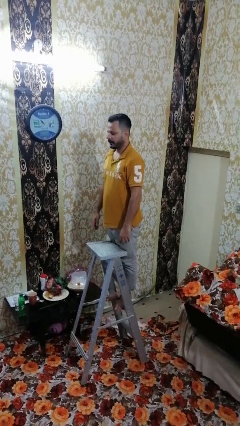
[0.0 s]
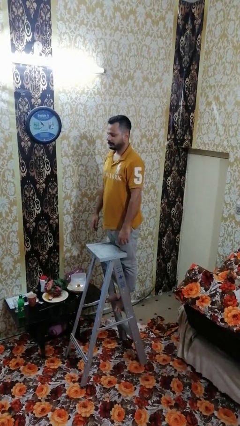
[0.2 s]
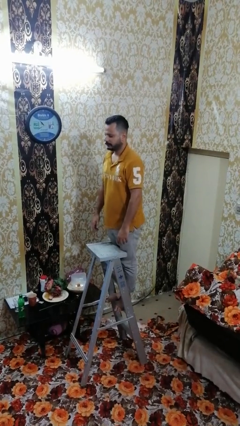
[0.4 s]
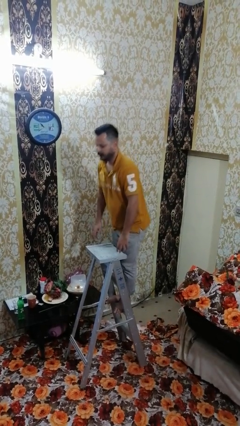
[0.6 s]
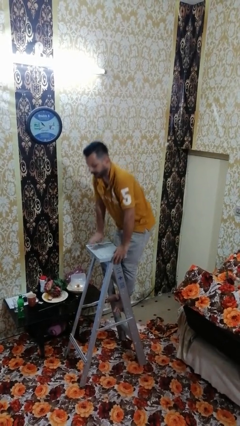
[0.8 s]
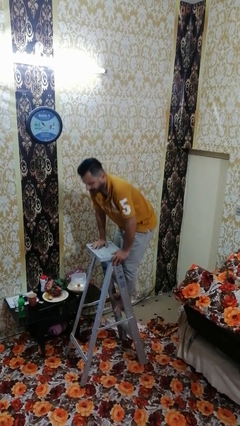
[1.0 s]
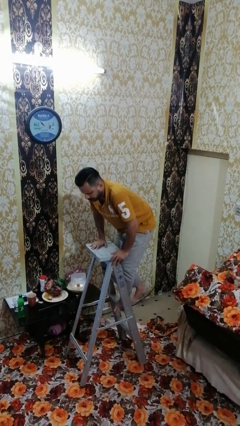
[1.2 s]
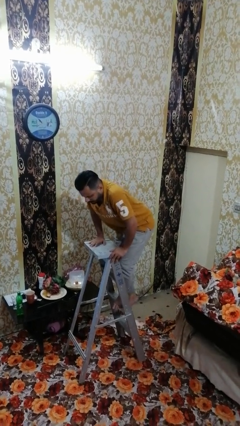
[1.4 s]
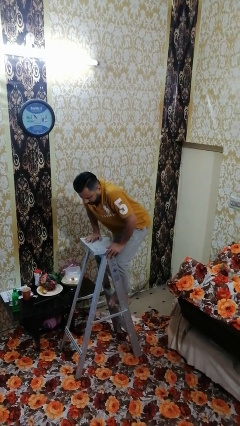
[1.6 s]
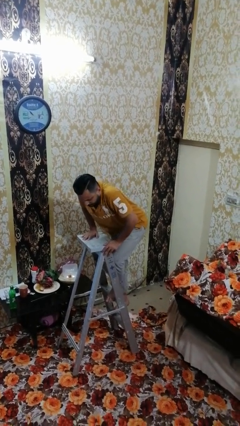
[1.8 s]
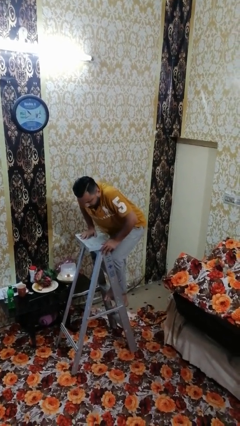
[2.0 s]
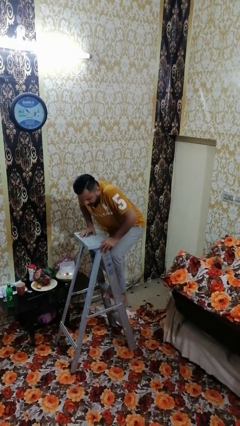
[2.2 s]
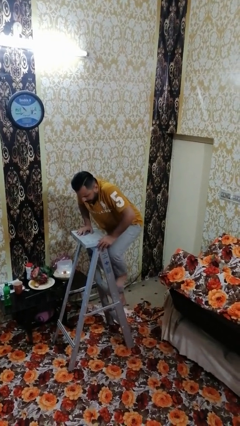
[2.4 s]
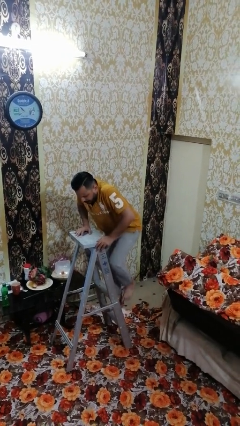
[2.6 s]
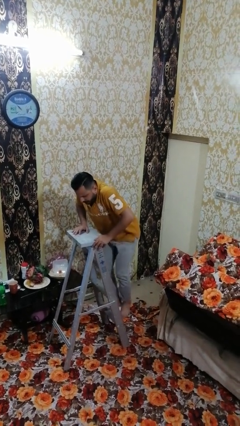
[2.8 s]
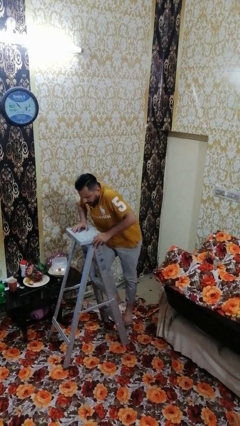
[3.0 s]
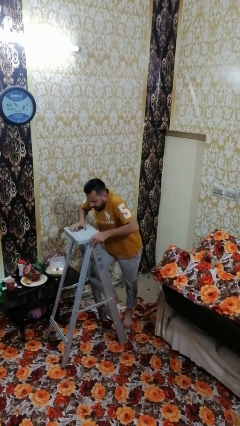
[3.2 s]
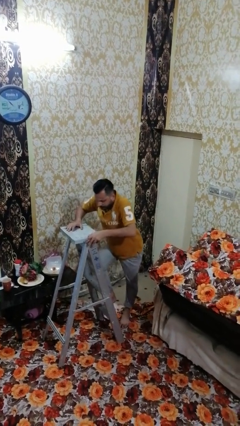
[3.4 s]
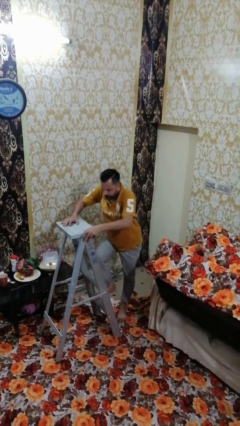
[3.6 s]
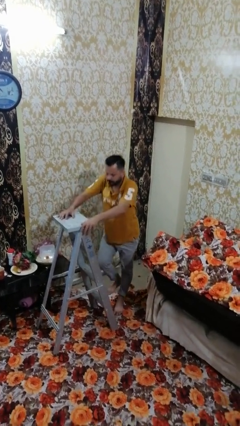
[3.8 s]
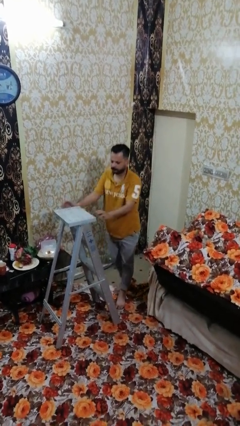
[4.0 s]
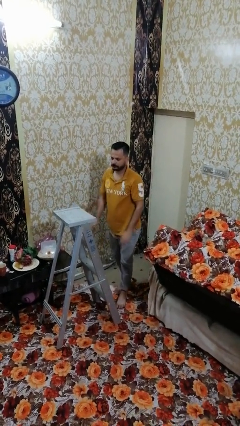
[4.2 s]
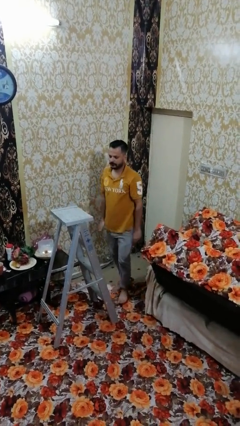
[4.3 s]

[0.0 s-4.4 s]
person climbs down ladder

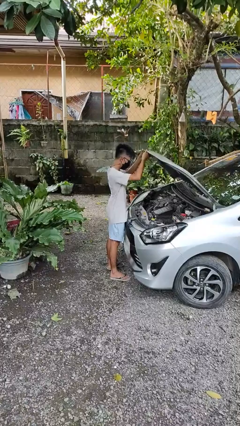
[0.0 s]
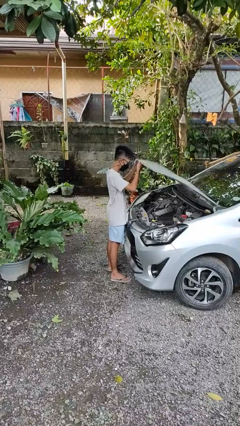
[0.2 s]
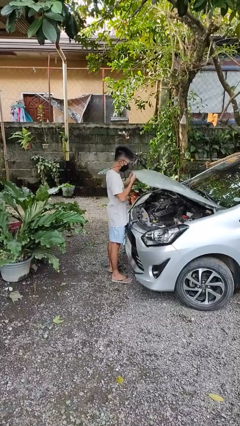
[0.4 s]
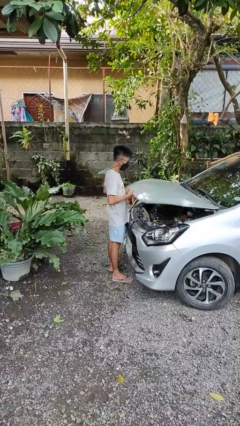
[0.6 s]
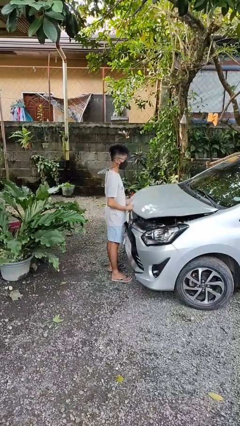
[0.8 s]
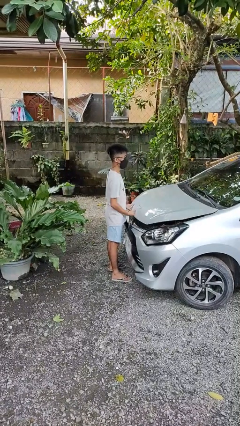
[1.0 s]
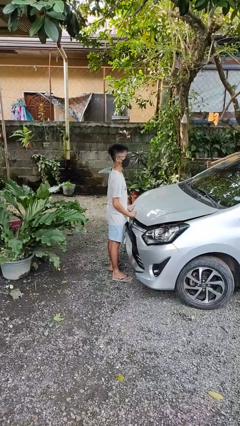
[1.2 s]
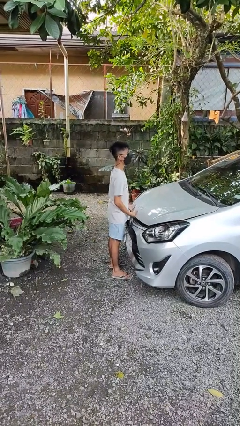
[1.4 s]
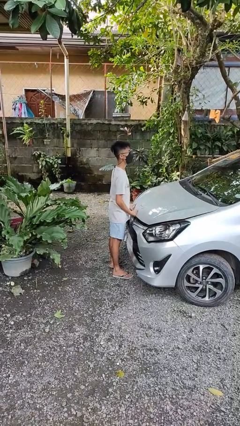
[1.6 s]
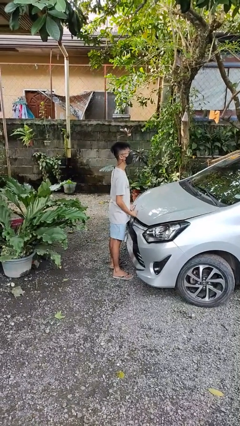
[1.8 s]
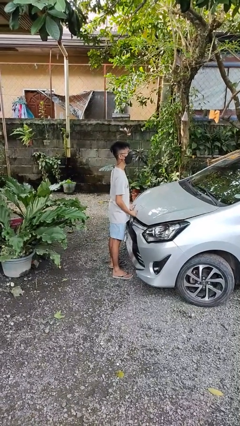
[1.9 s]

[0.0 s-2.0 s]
person closes car hood

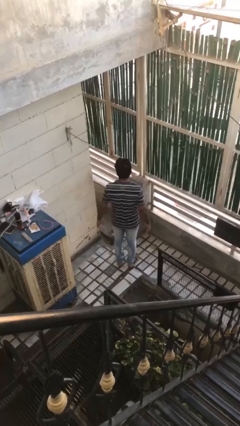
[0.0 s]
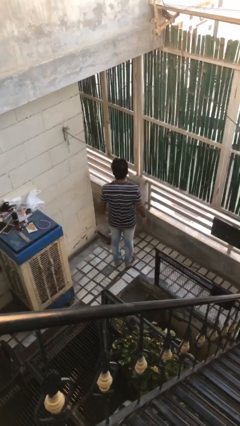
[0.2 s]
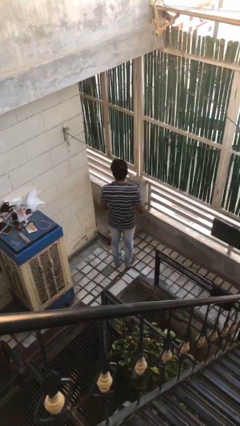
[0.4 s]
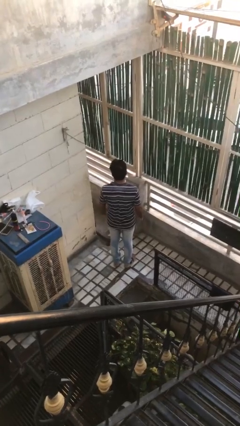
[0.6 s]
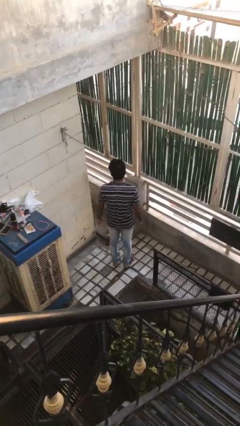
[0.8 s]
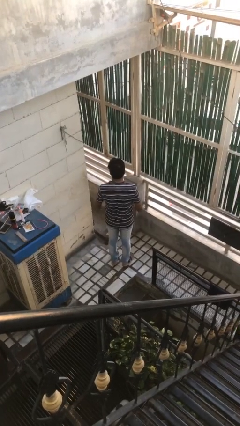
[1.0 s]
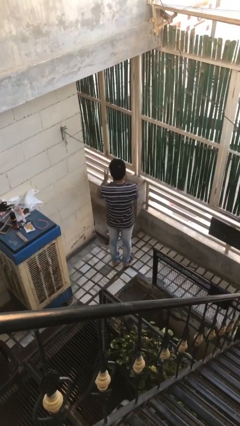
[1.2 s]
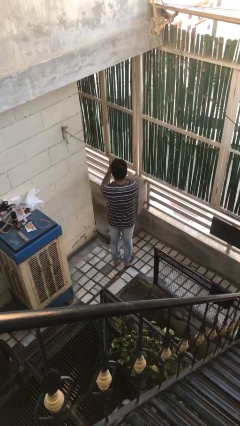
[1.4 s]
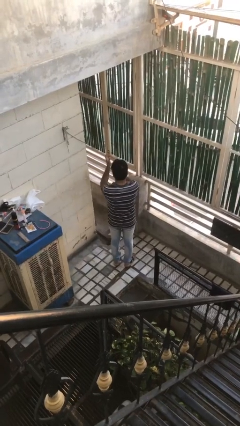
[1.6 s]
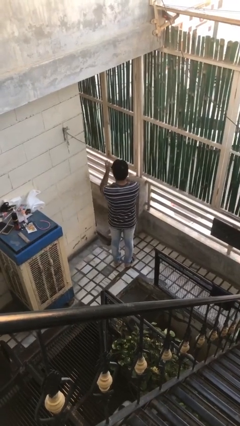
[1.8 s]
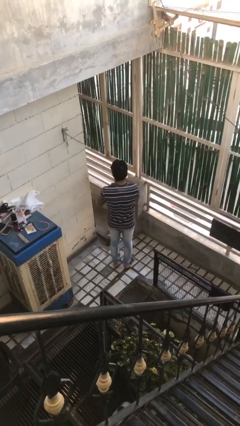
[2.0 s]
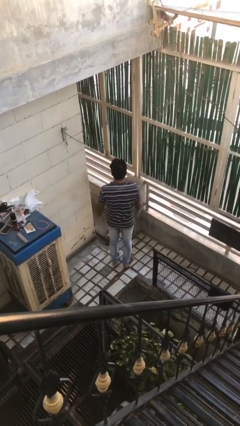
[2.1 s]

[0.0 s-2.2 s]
person claps hands

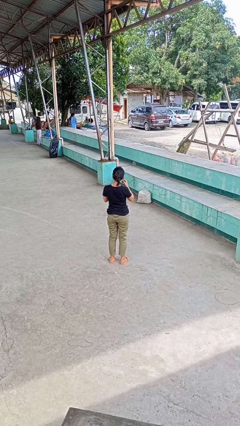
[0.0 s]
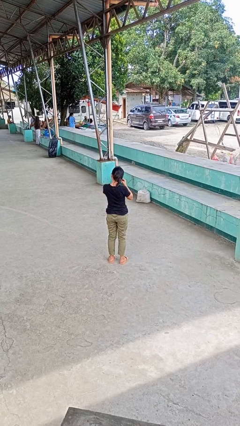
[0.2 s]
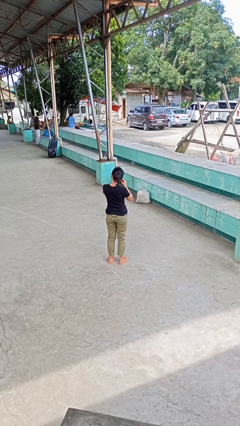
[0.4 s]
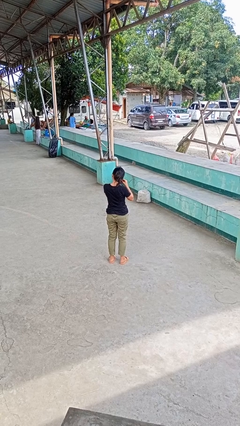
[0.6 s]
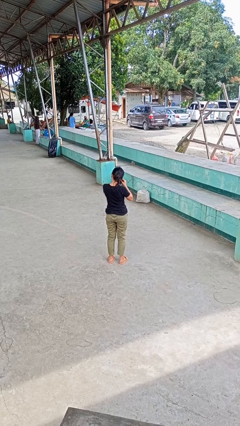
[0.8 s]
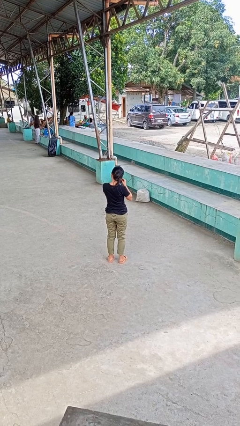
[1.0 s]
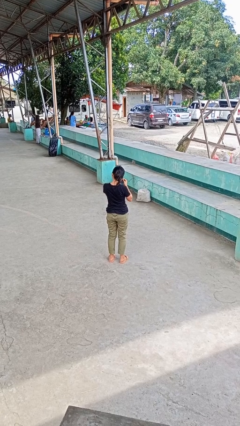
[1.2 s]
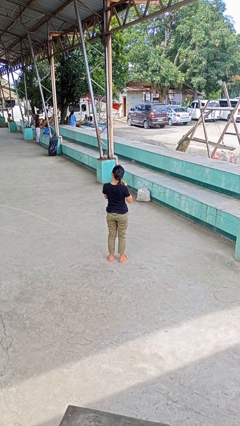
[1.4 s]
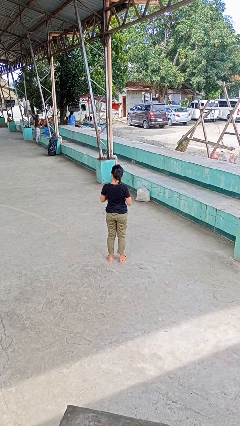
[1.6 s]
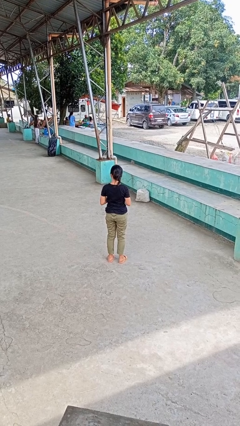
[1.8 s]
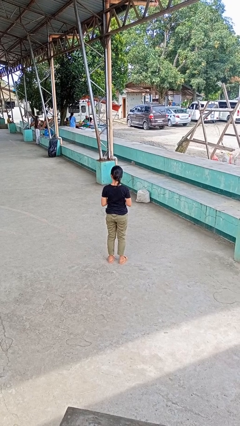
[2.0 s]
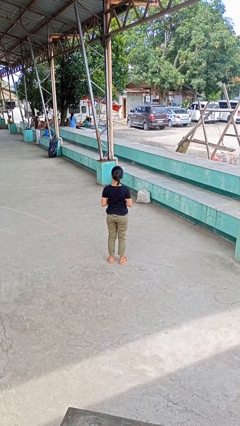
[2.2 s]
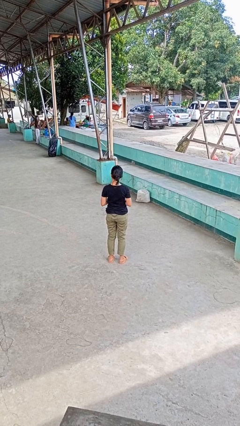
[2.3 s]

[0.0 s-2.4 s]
person takes off earrings

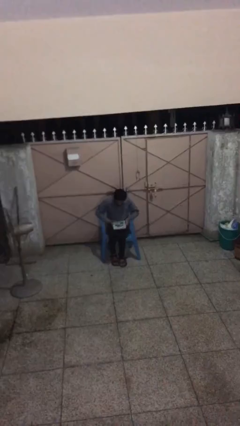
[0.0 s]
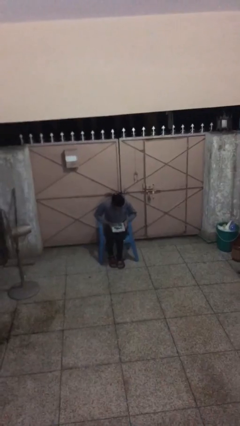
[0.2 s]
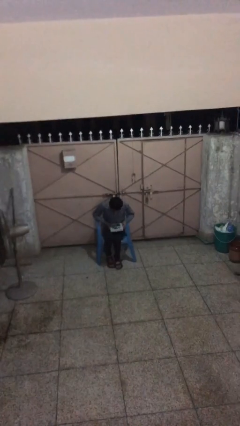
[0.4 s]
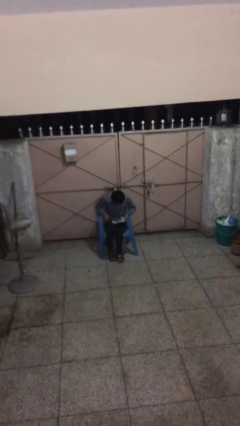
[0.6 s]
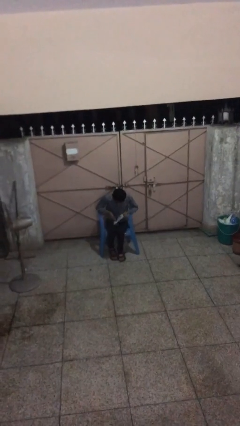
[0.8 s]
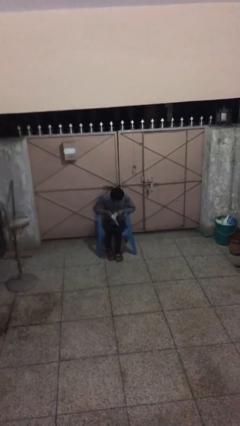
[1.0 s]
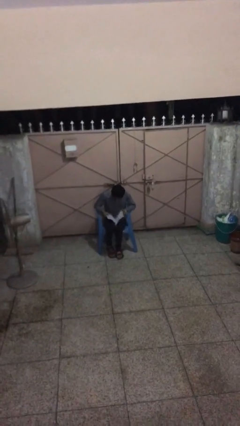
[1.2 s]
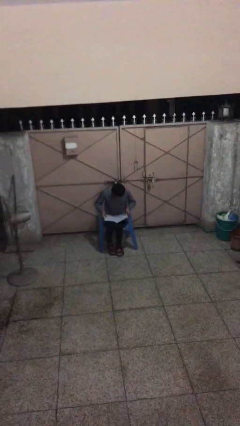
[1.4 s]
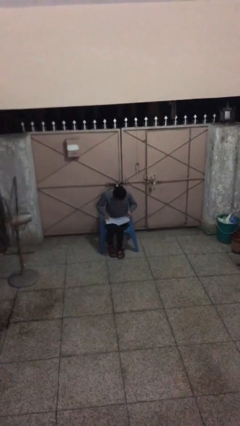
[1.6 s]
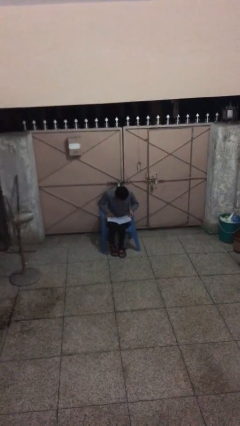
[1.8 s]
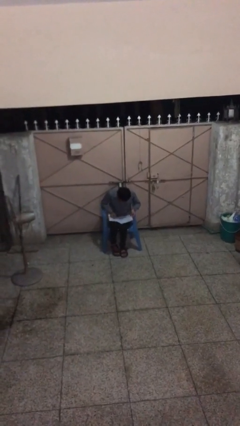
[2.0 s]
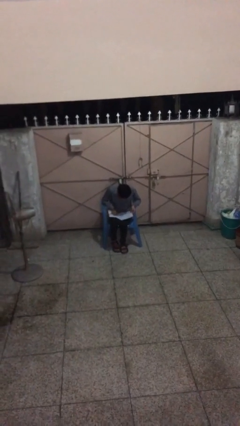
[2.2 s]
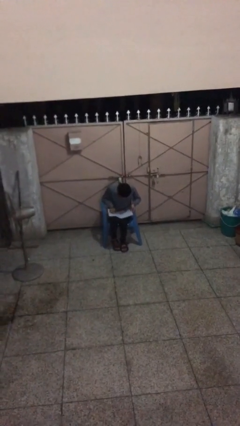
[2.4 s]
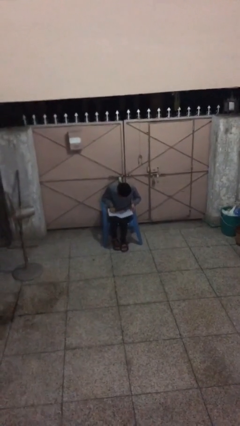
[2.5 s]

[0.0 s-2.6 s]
person reads document

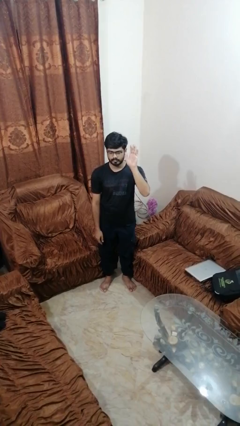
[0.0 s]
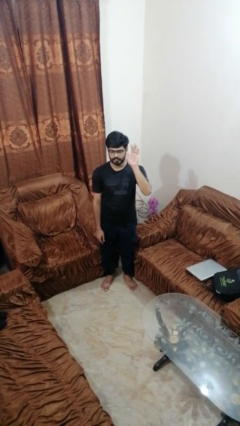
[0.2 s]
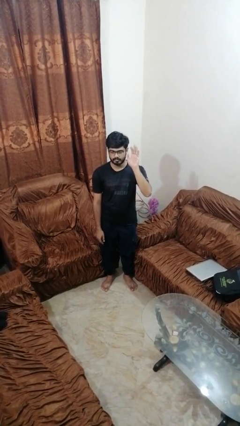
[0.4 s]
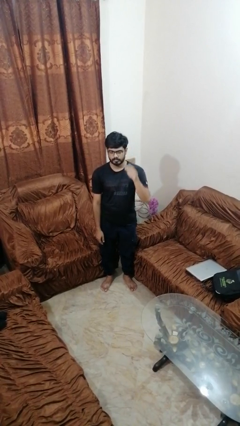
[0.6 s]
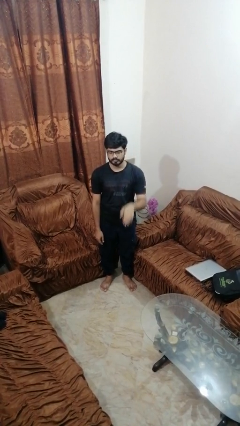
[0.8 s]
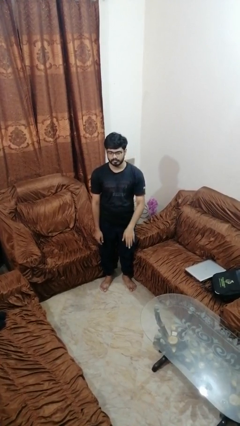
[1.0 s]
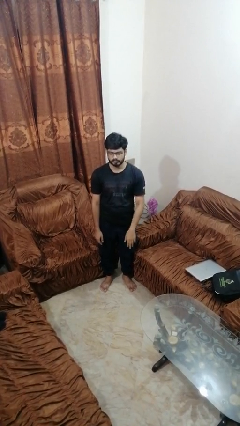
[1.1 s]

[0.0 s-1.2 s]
person gestures lower hand

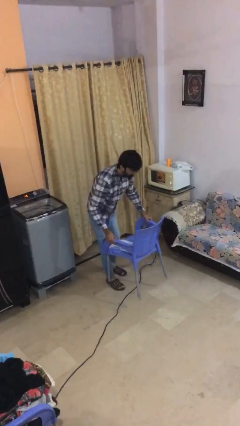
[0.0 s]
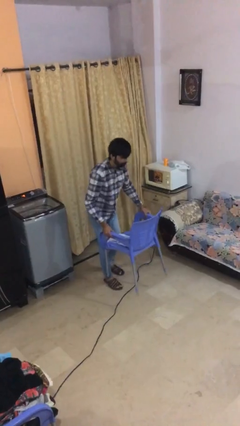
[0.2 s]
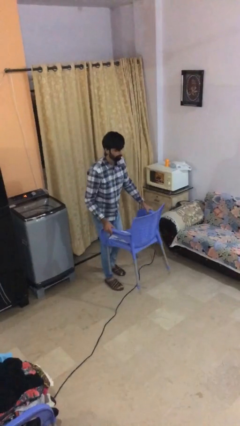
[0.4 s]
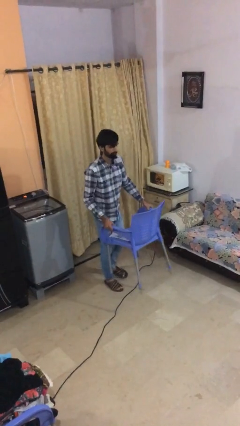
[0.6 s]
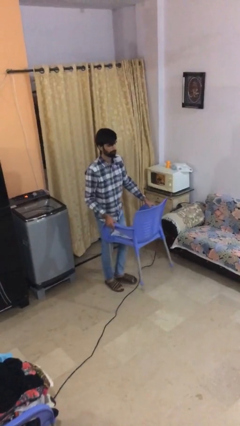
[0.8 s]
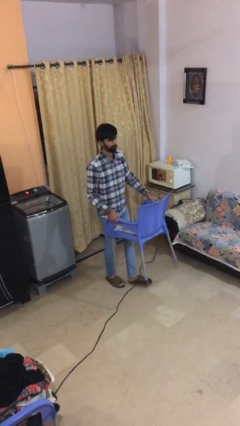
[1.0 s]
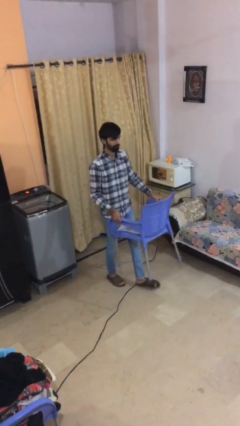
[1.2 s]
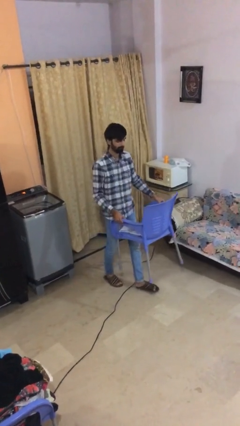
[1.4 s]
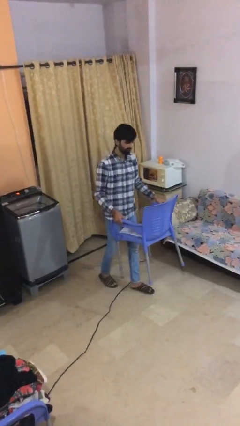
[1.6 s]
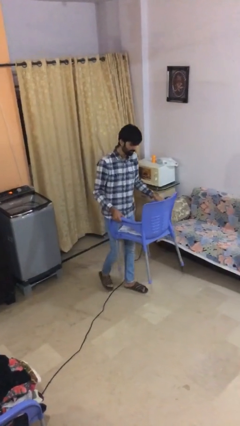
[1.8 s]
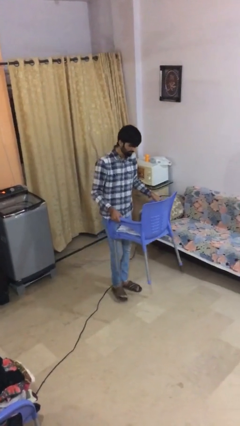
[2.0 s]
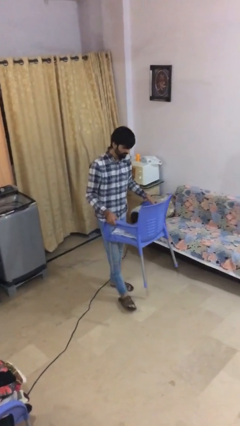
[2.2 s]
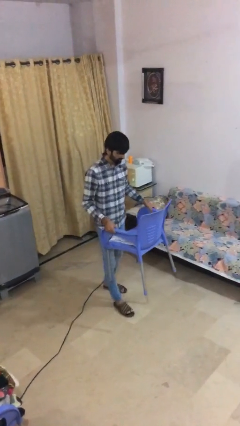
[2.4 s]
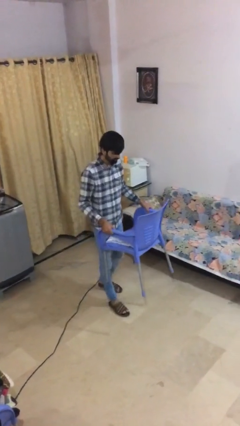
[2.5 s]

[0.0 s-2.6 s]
person carries heavy object
